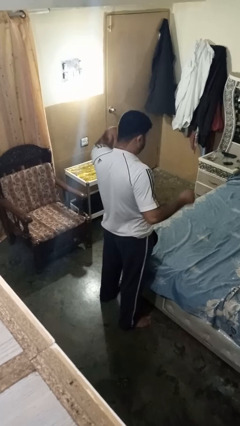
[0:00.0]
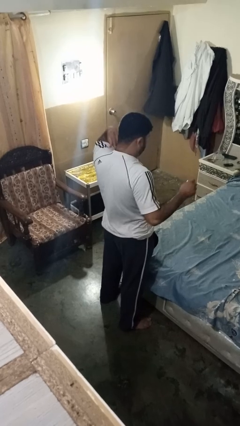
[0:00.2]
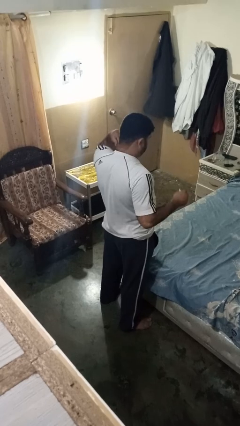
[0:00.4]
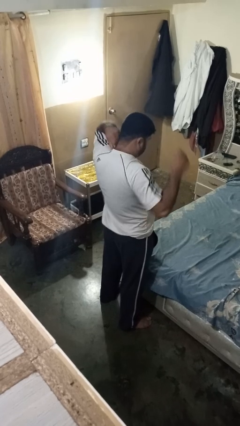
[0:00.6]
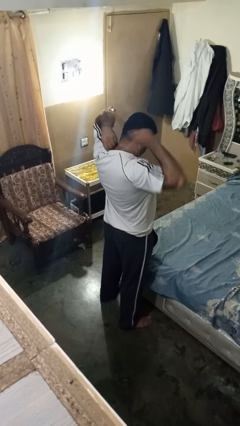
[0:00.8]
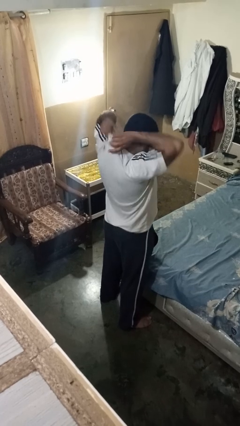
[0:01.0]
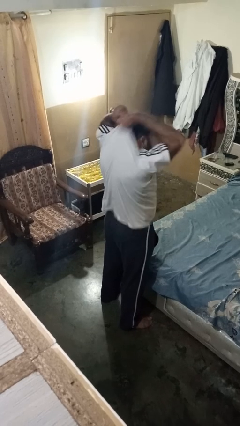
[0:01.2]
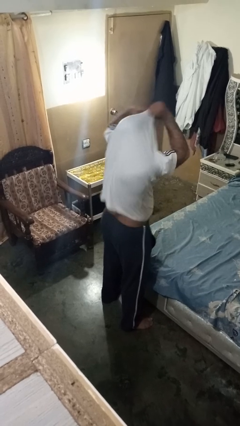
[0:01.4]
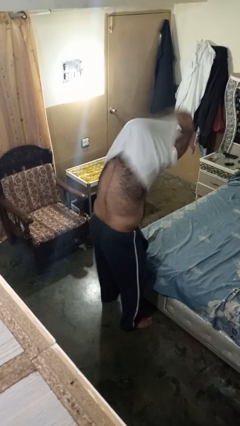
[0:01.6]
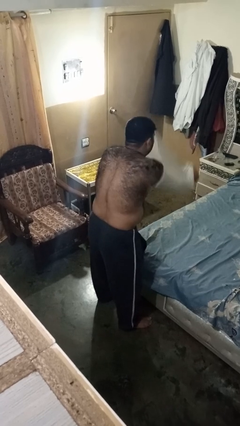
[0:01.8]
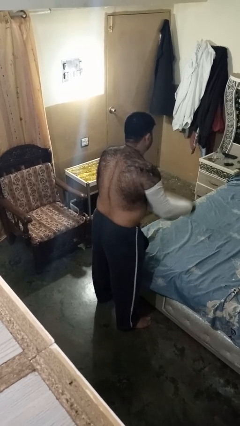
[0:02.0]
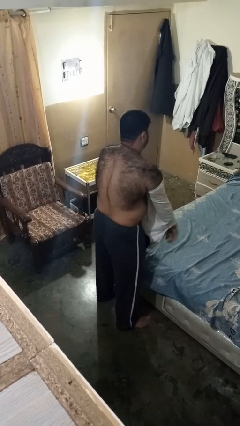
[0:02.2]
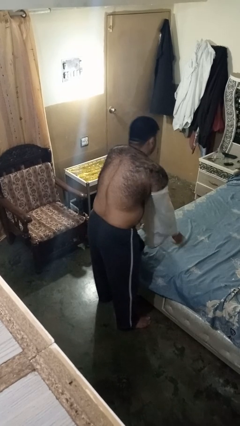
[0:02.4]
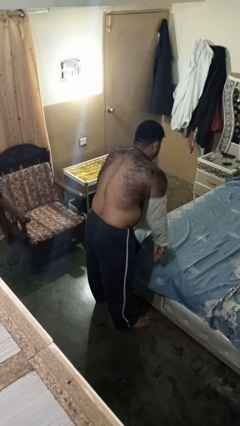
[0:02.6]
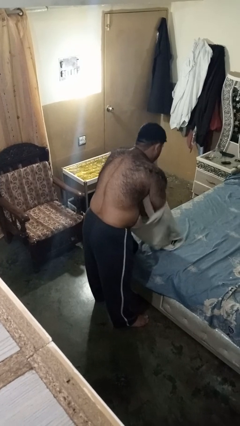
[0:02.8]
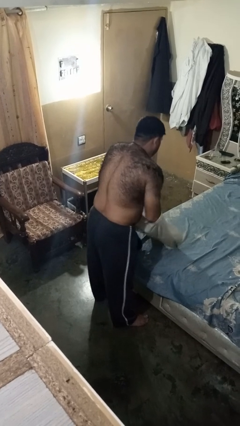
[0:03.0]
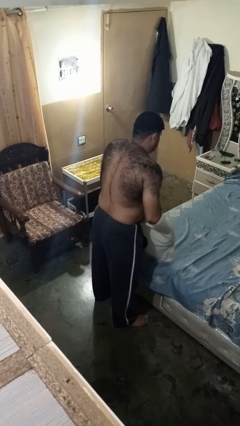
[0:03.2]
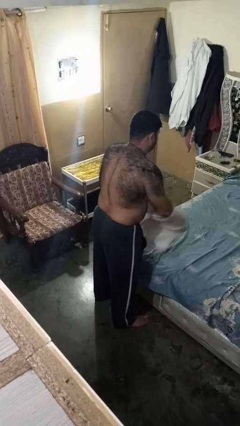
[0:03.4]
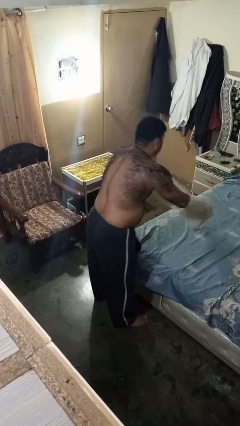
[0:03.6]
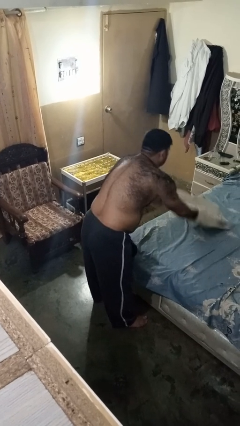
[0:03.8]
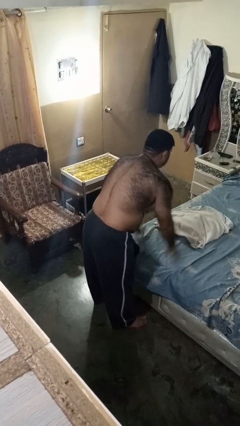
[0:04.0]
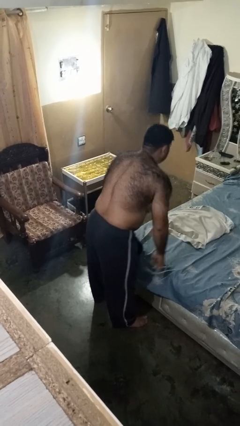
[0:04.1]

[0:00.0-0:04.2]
person takes off shirt

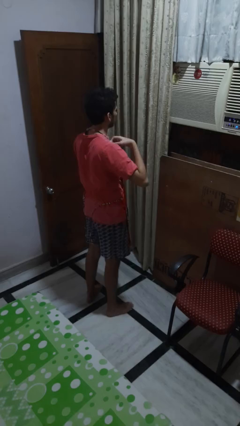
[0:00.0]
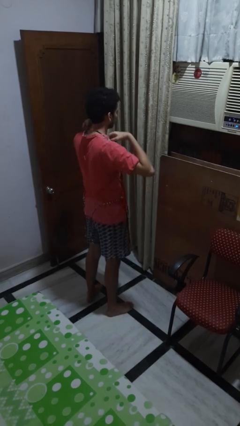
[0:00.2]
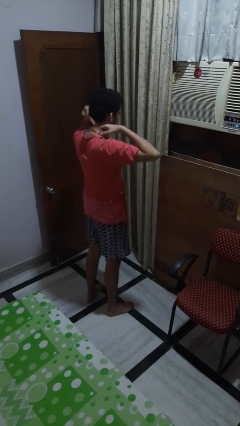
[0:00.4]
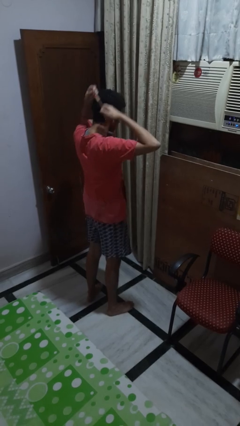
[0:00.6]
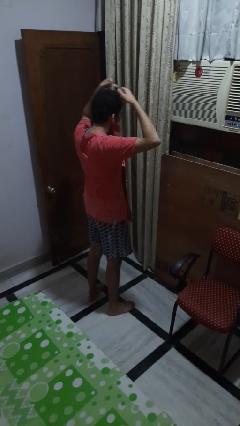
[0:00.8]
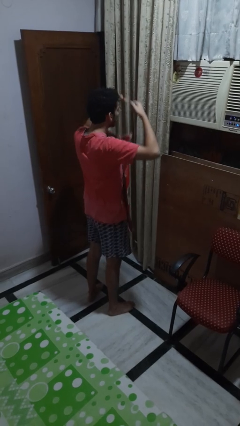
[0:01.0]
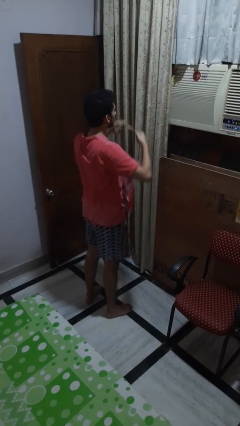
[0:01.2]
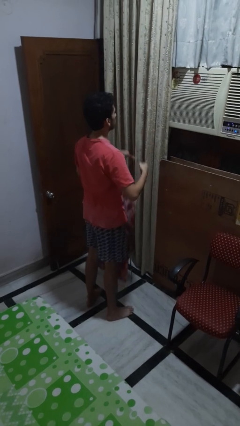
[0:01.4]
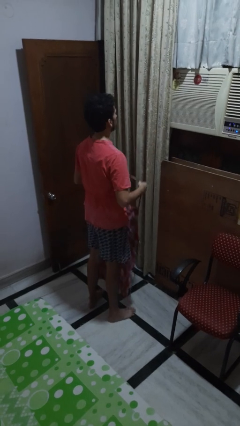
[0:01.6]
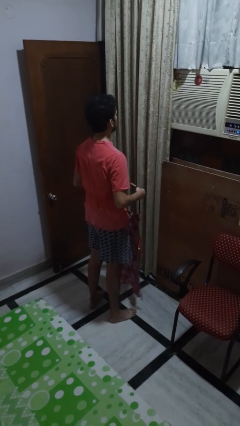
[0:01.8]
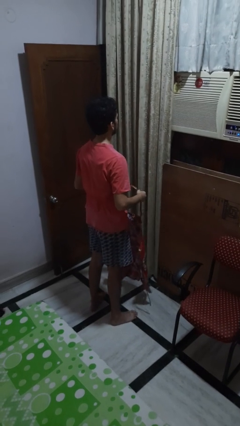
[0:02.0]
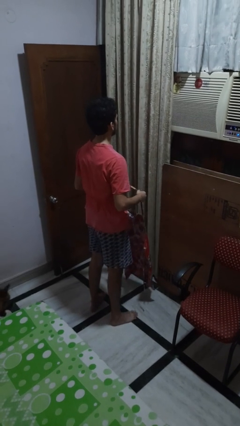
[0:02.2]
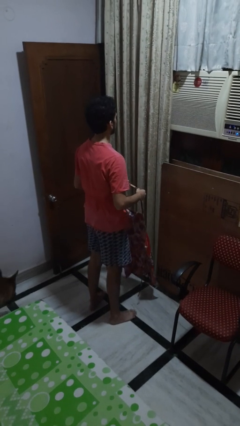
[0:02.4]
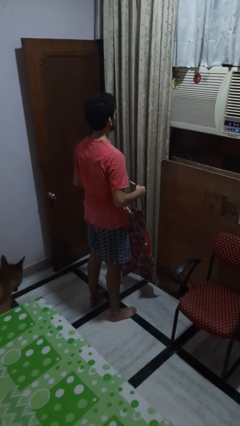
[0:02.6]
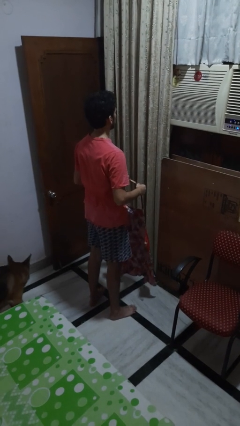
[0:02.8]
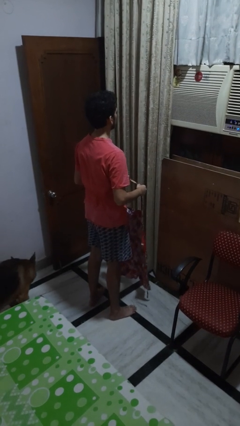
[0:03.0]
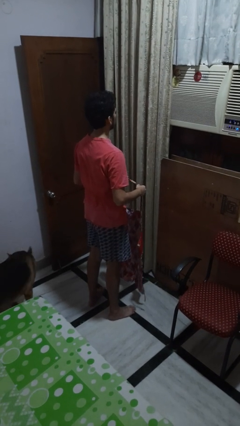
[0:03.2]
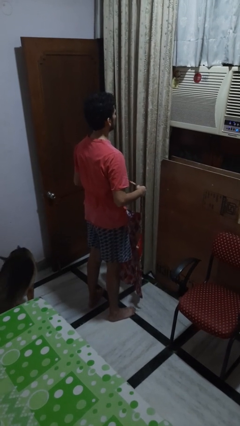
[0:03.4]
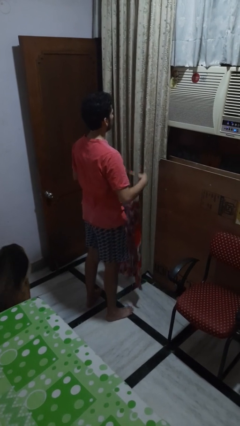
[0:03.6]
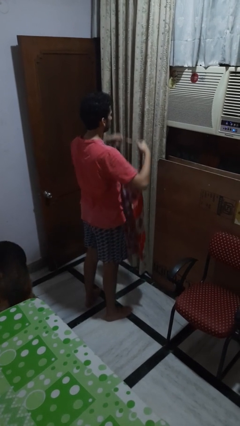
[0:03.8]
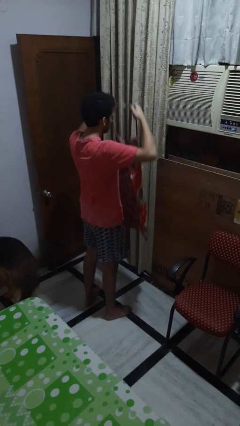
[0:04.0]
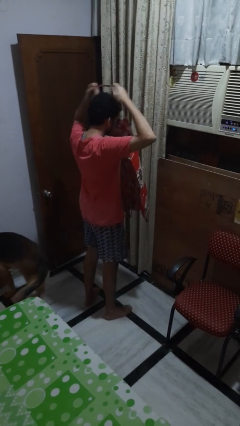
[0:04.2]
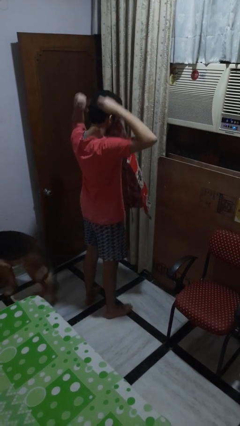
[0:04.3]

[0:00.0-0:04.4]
person takes off apron

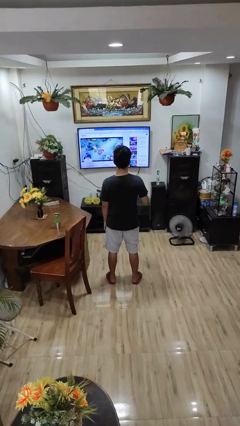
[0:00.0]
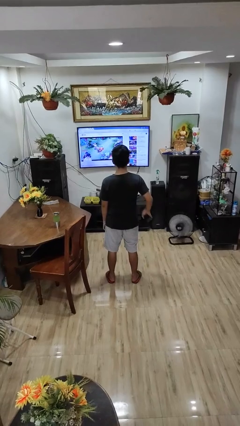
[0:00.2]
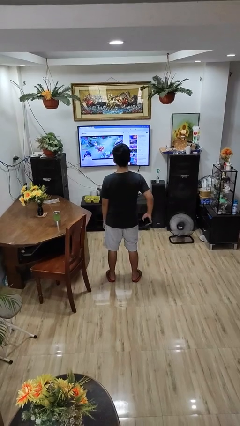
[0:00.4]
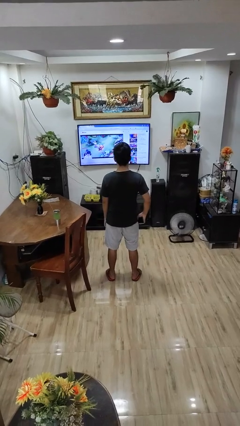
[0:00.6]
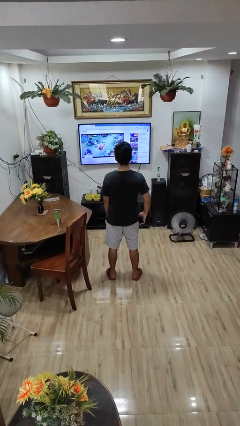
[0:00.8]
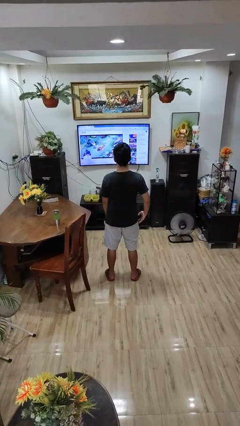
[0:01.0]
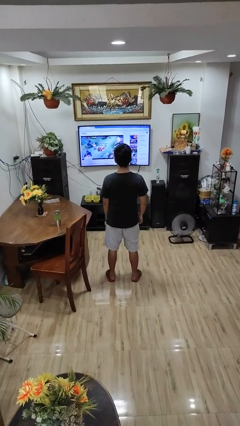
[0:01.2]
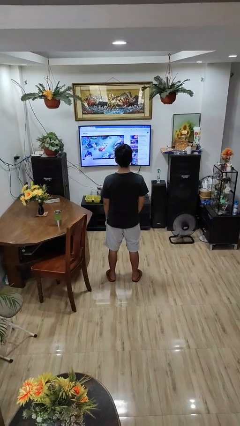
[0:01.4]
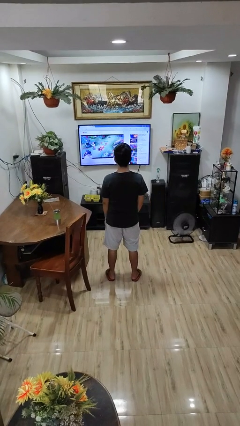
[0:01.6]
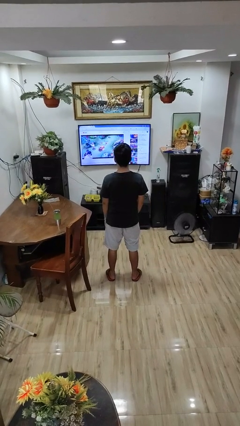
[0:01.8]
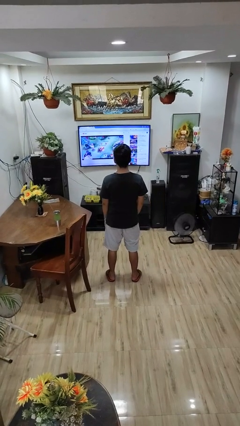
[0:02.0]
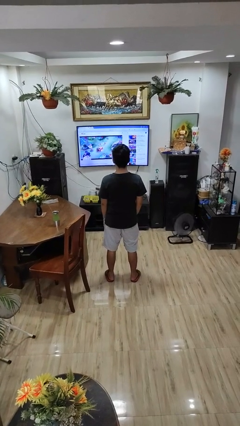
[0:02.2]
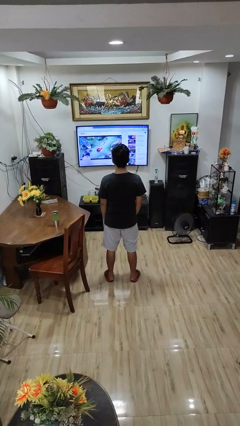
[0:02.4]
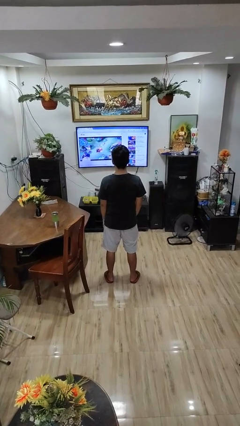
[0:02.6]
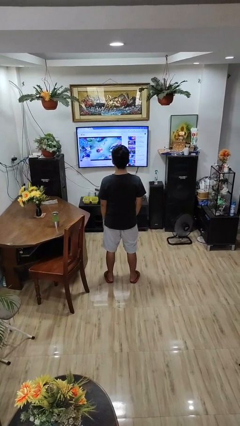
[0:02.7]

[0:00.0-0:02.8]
person puts phone into pocket

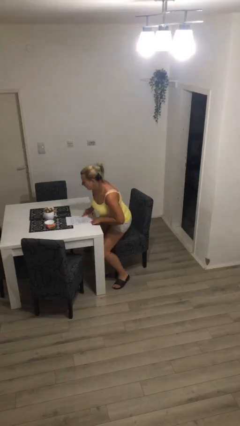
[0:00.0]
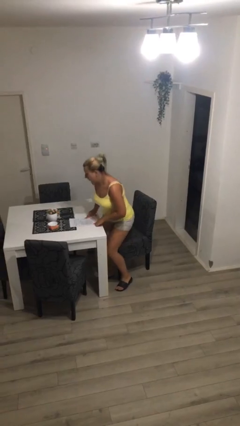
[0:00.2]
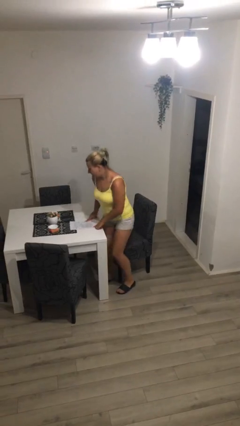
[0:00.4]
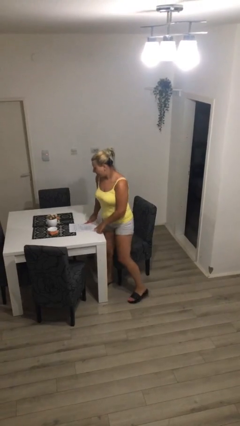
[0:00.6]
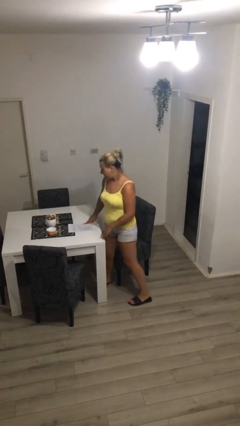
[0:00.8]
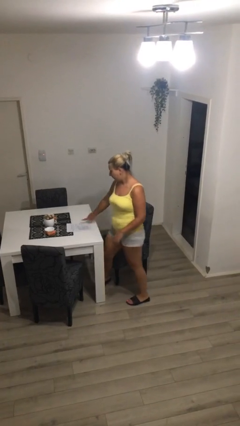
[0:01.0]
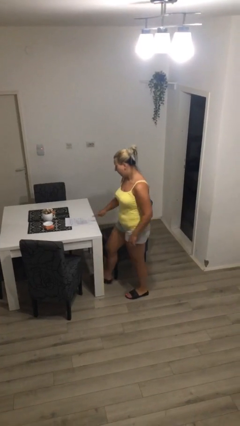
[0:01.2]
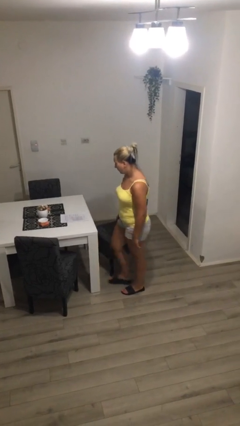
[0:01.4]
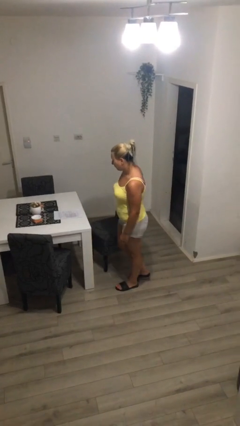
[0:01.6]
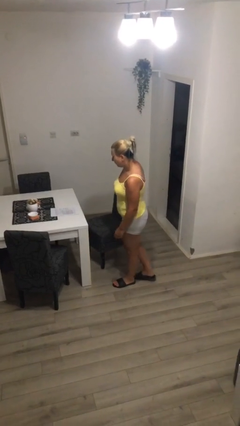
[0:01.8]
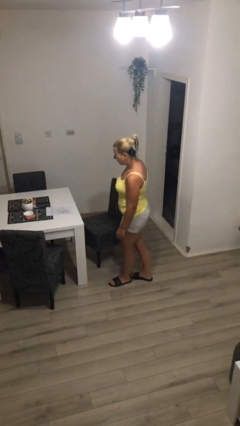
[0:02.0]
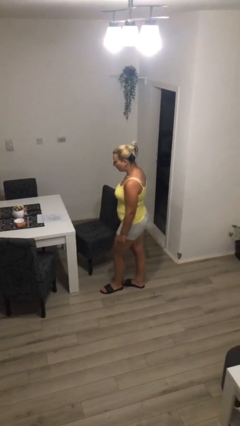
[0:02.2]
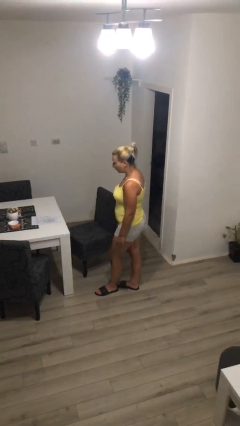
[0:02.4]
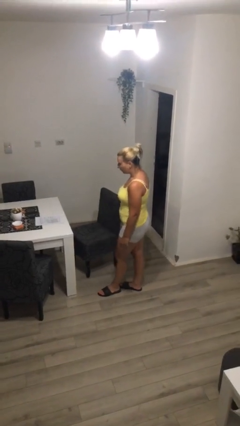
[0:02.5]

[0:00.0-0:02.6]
person stands up

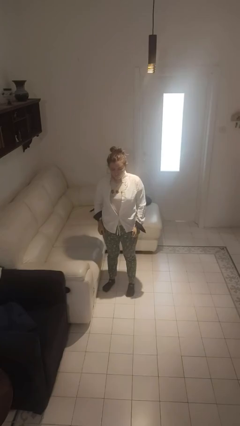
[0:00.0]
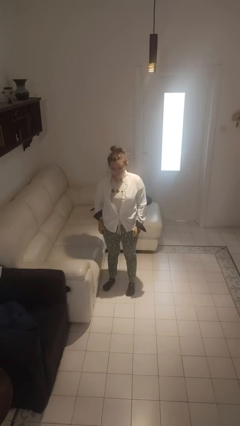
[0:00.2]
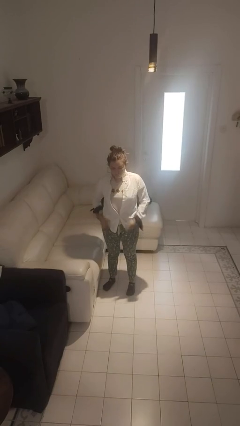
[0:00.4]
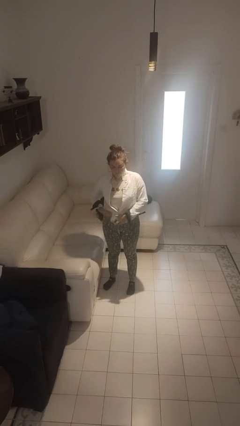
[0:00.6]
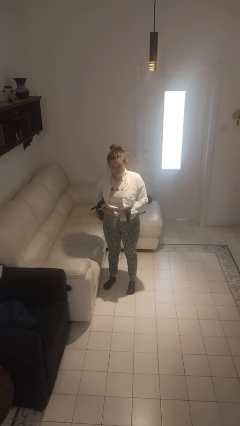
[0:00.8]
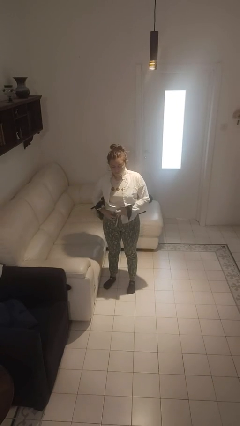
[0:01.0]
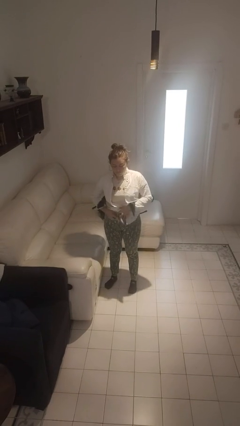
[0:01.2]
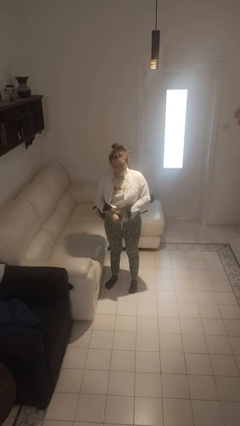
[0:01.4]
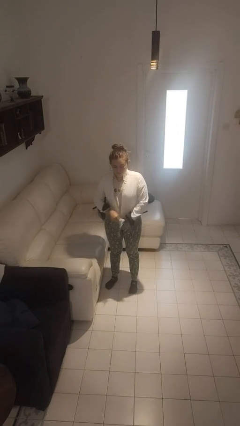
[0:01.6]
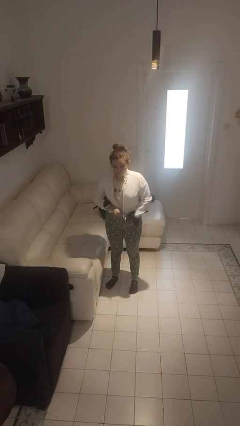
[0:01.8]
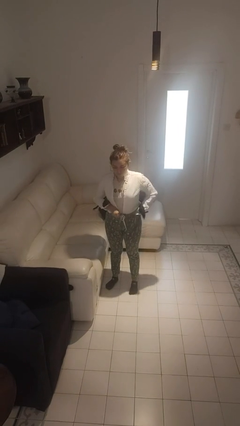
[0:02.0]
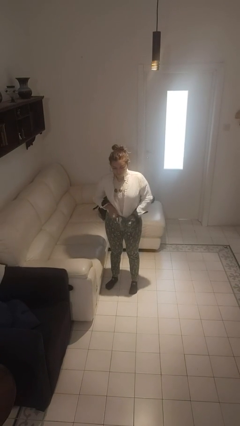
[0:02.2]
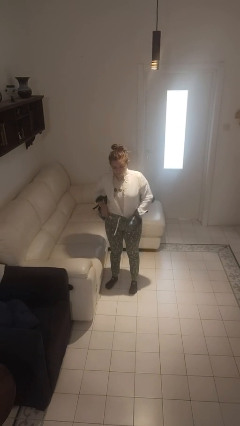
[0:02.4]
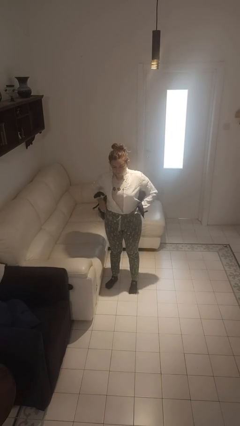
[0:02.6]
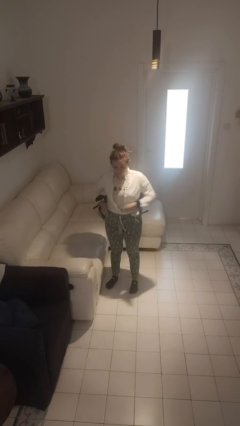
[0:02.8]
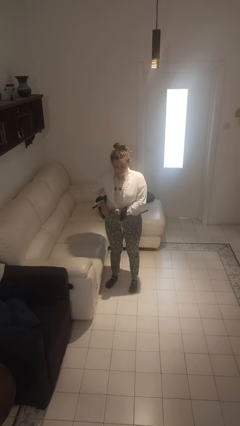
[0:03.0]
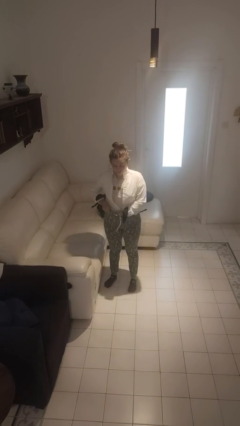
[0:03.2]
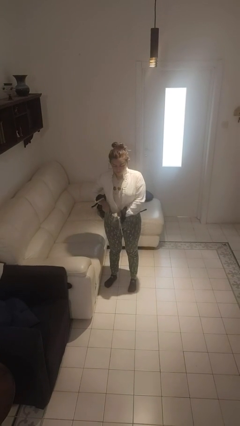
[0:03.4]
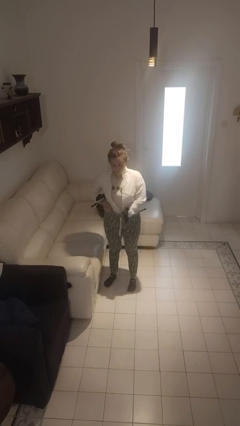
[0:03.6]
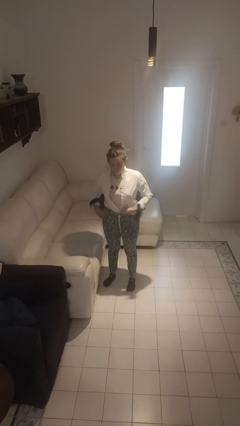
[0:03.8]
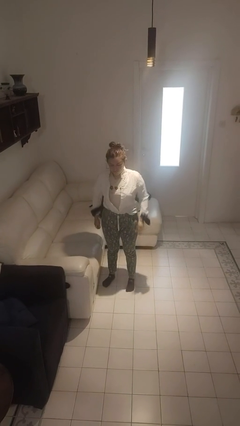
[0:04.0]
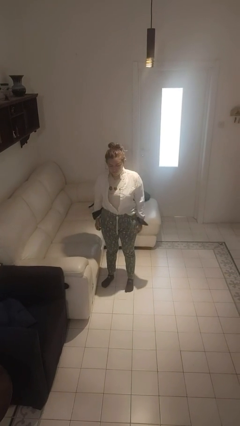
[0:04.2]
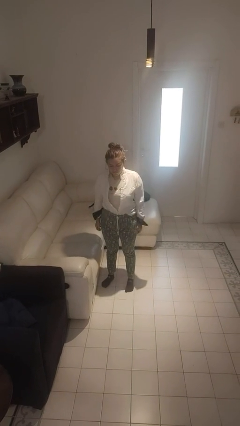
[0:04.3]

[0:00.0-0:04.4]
person tucks in shirt
